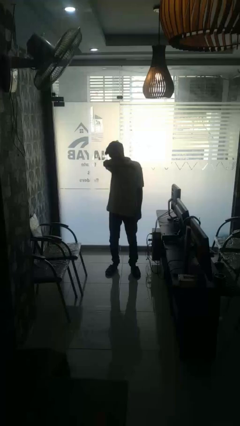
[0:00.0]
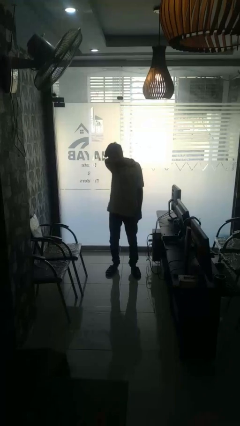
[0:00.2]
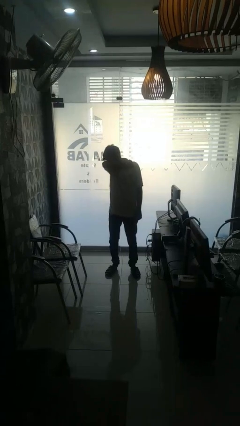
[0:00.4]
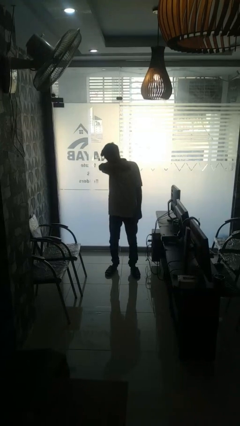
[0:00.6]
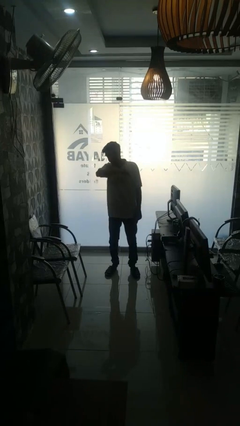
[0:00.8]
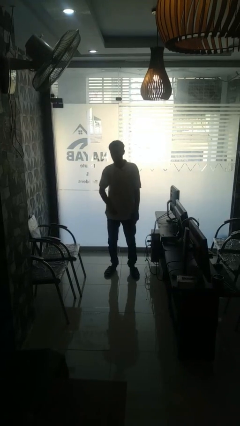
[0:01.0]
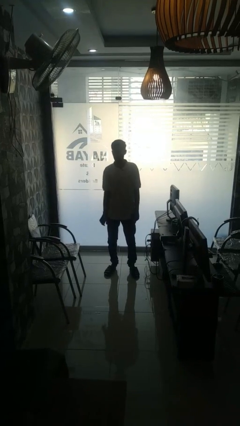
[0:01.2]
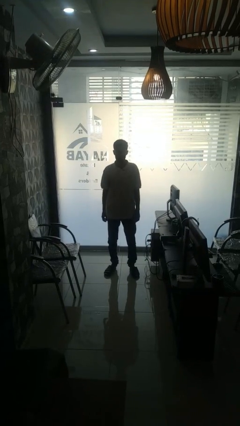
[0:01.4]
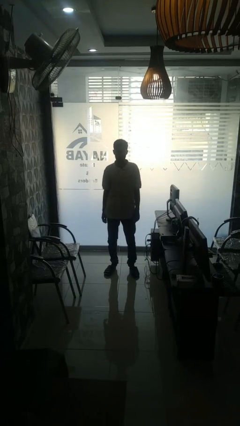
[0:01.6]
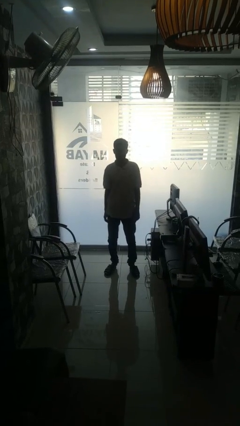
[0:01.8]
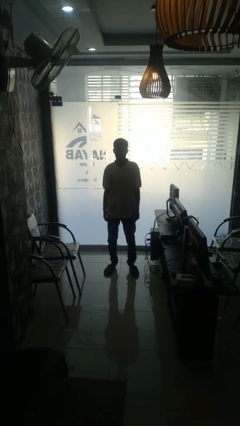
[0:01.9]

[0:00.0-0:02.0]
person sneezes into arm

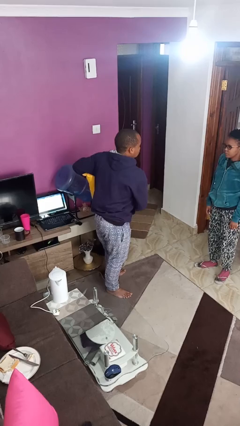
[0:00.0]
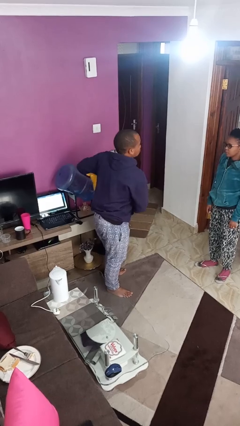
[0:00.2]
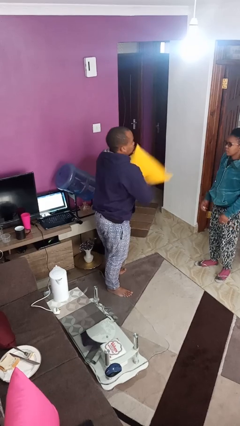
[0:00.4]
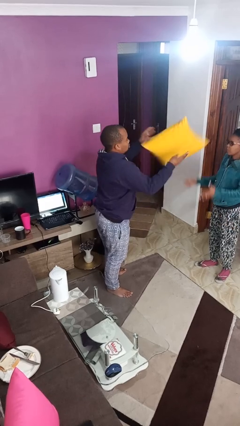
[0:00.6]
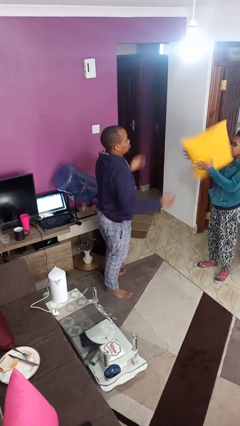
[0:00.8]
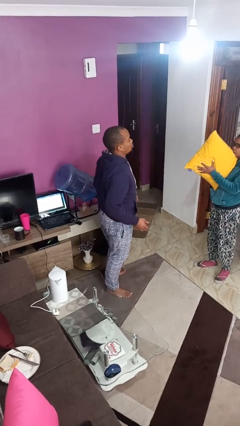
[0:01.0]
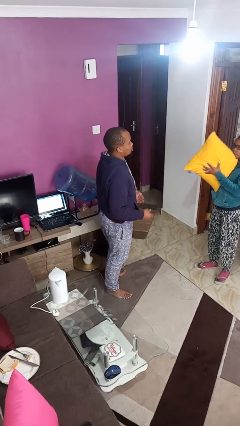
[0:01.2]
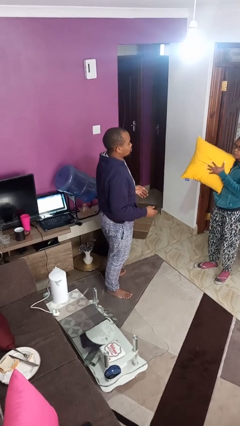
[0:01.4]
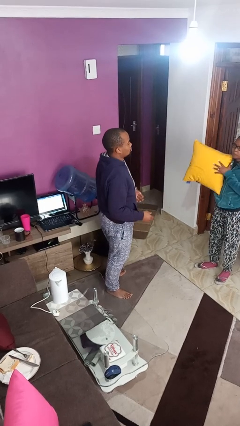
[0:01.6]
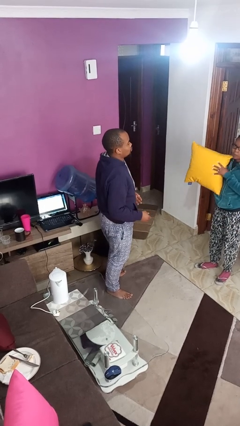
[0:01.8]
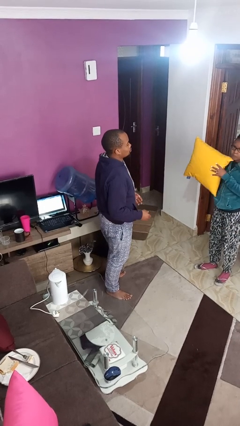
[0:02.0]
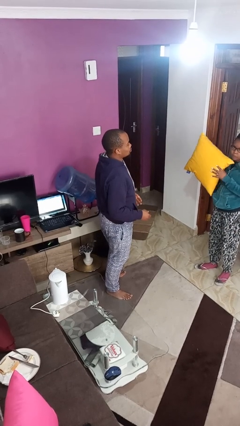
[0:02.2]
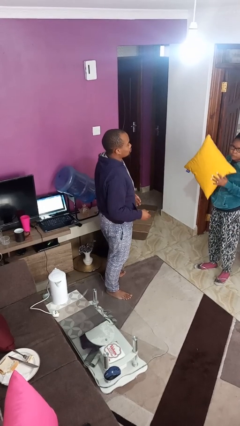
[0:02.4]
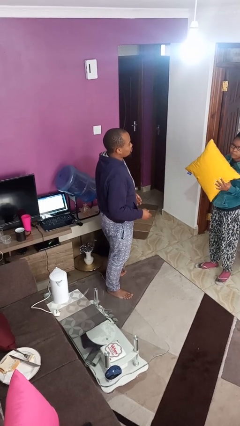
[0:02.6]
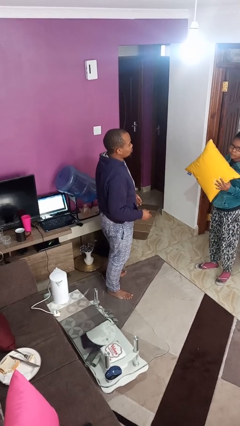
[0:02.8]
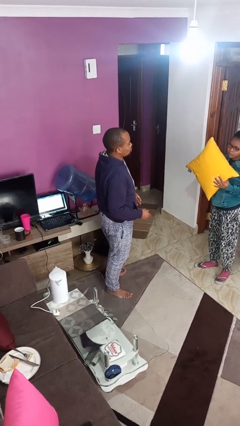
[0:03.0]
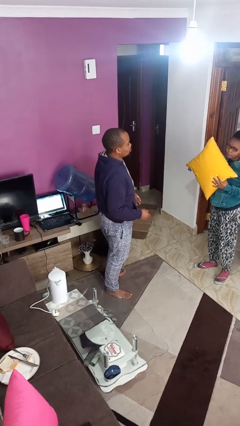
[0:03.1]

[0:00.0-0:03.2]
person throws object to person

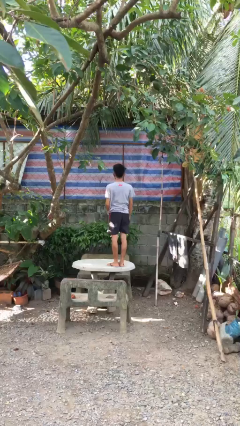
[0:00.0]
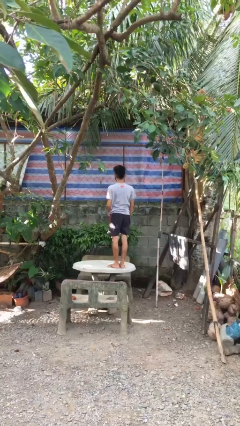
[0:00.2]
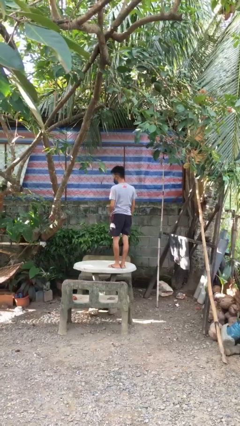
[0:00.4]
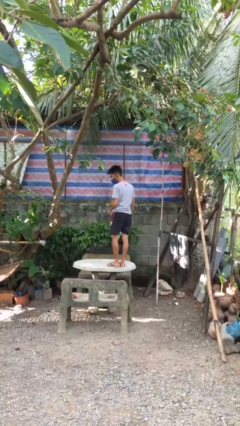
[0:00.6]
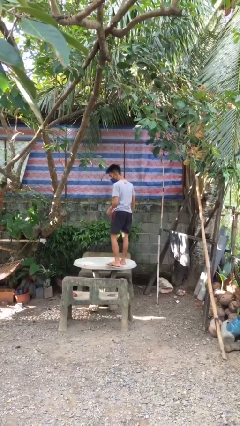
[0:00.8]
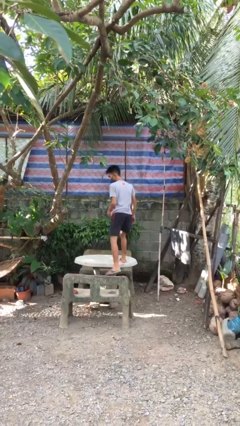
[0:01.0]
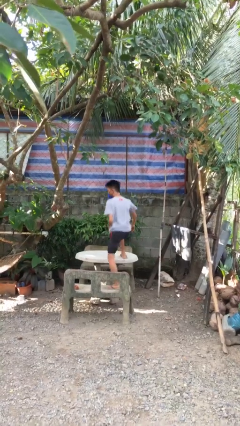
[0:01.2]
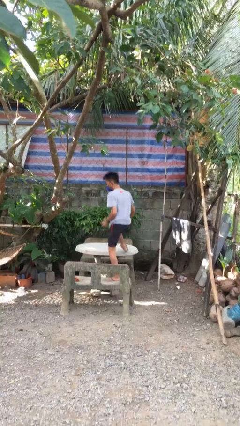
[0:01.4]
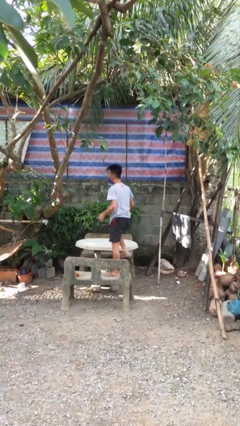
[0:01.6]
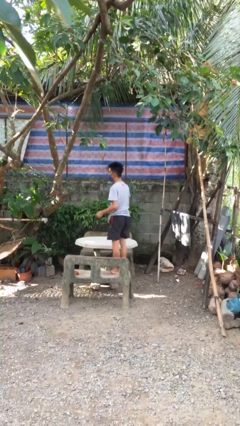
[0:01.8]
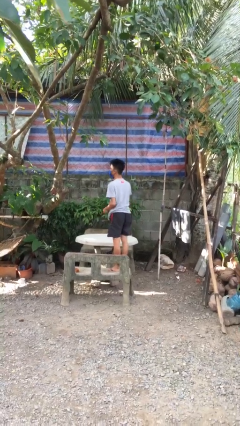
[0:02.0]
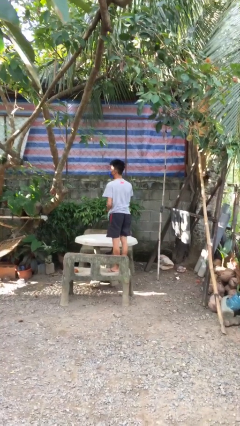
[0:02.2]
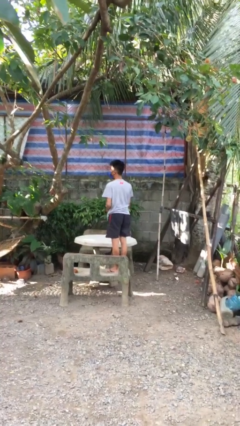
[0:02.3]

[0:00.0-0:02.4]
person climbs off table

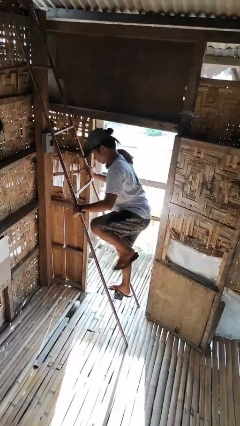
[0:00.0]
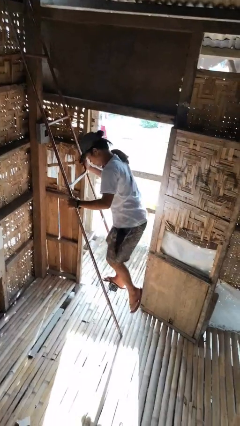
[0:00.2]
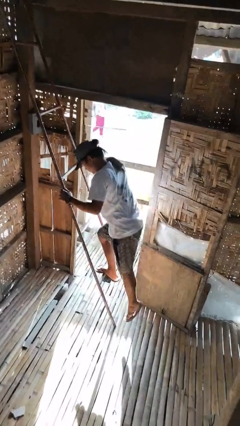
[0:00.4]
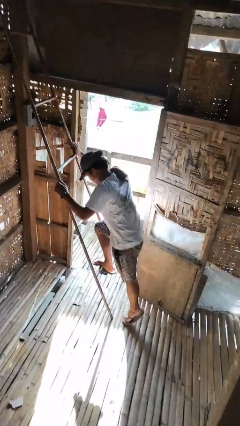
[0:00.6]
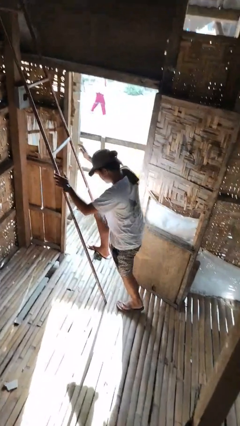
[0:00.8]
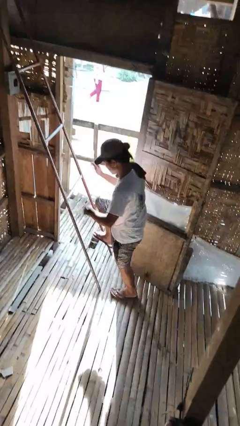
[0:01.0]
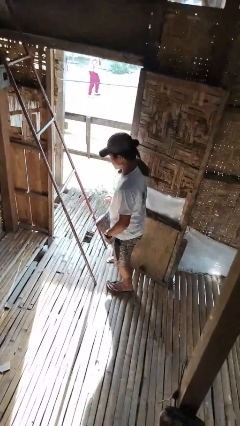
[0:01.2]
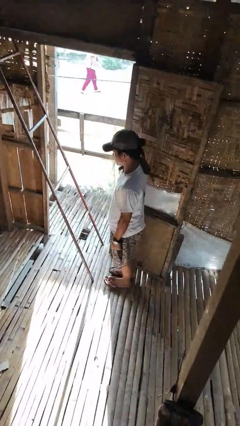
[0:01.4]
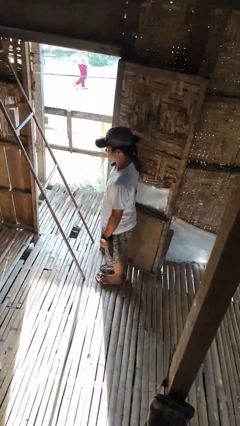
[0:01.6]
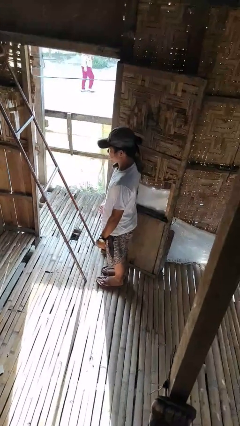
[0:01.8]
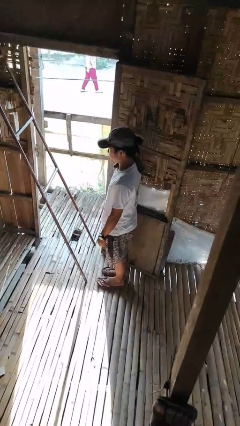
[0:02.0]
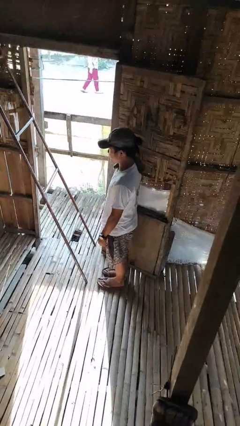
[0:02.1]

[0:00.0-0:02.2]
person climbs down ladder

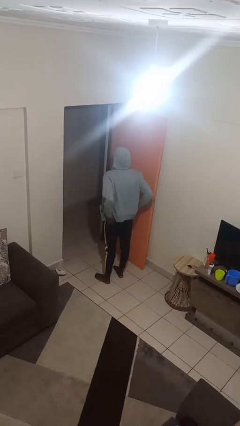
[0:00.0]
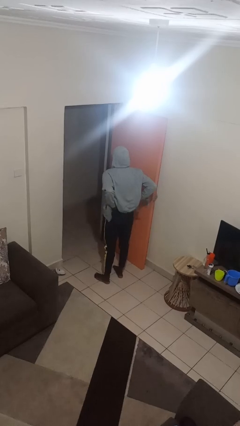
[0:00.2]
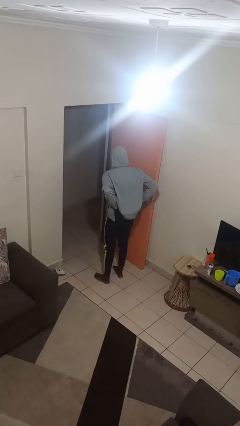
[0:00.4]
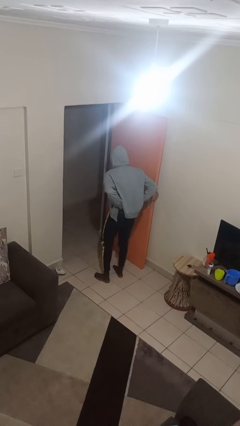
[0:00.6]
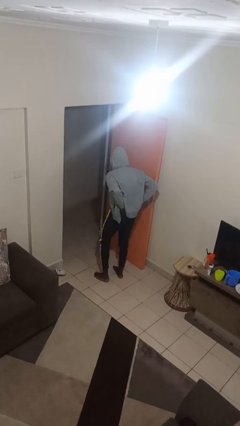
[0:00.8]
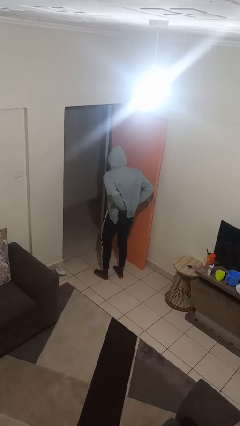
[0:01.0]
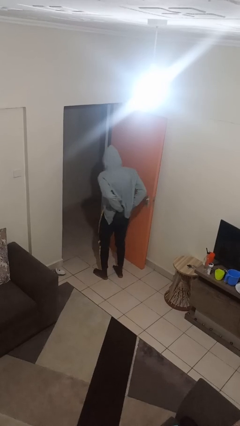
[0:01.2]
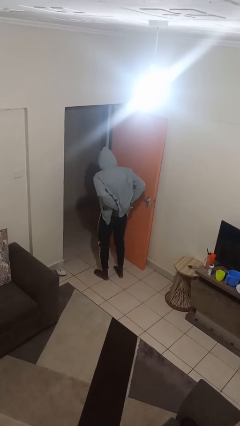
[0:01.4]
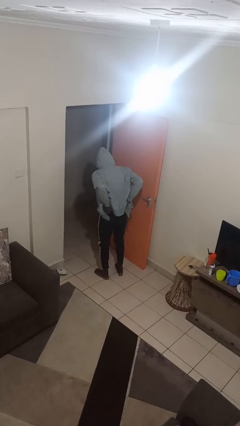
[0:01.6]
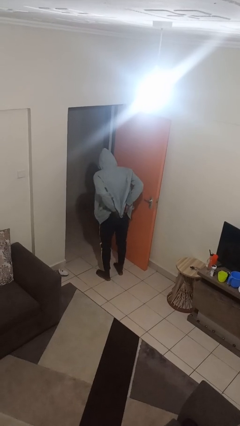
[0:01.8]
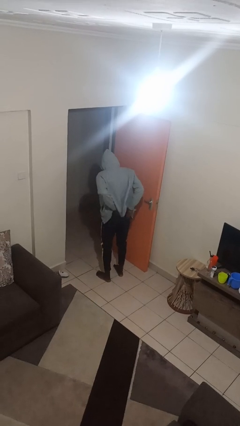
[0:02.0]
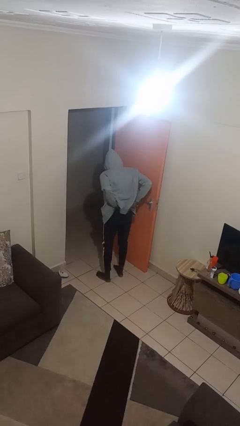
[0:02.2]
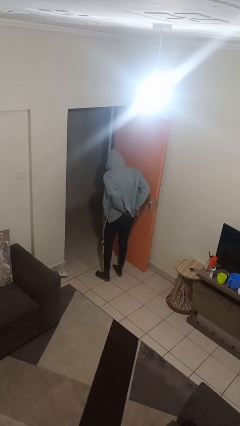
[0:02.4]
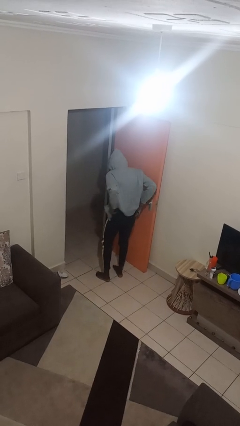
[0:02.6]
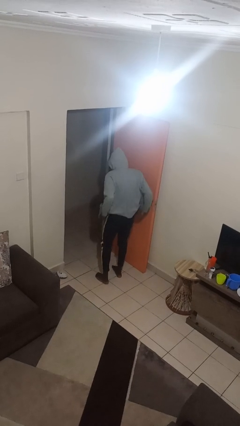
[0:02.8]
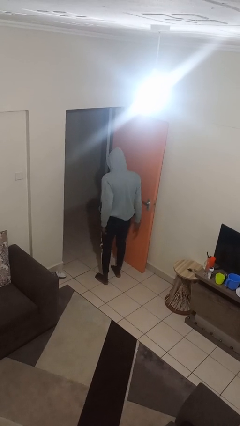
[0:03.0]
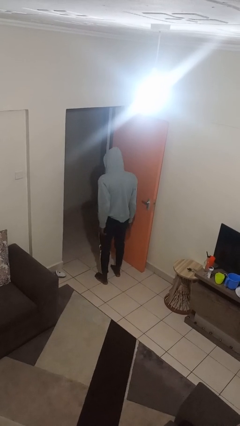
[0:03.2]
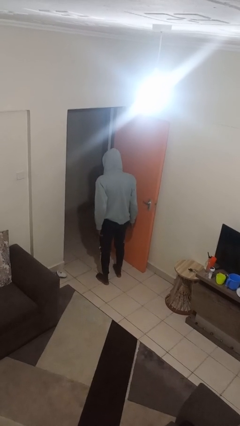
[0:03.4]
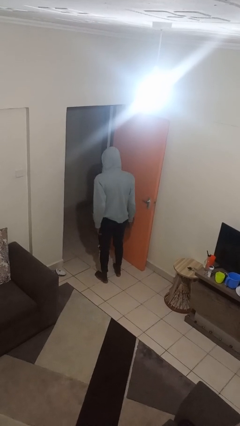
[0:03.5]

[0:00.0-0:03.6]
person hikes up pants

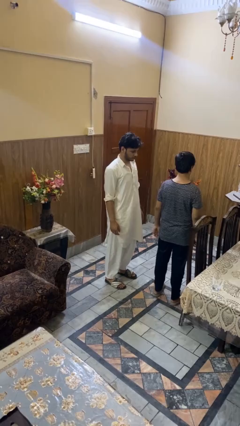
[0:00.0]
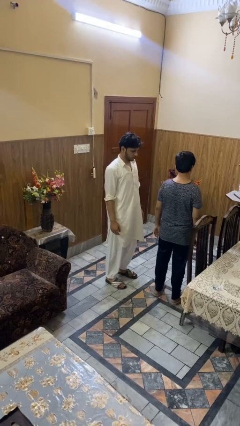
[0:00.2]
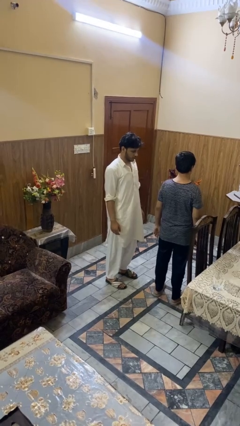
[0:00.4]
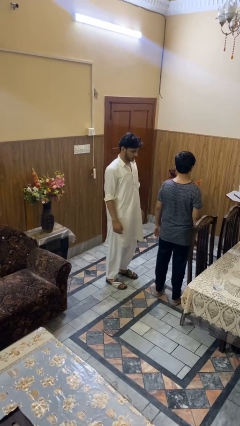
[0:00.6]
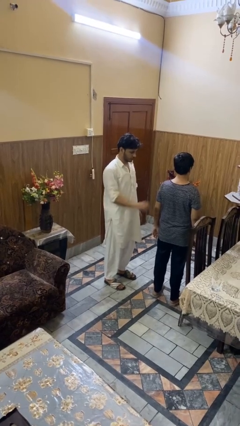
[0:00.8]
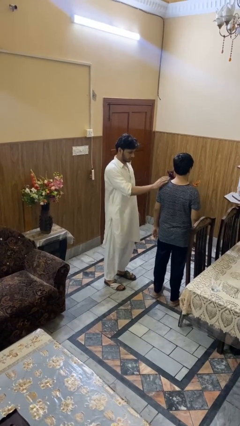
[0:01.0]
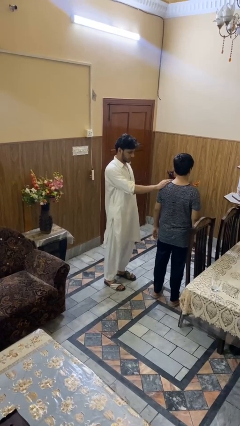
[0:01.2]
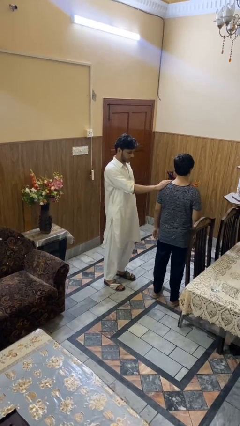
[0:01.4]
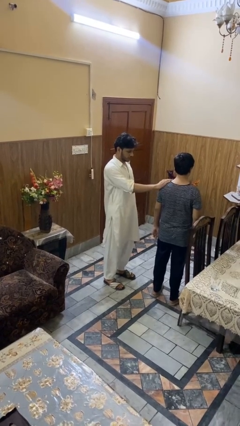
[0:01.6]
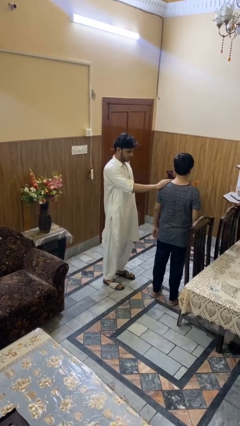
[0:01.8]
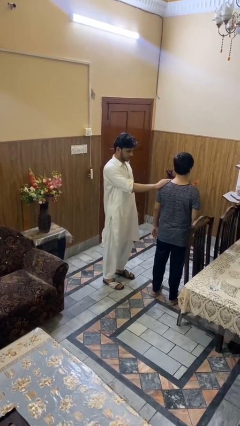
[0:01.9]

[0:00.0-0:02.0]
person grabs person by shoulder

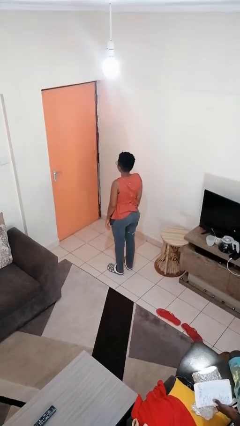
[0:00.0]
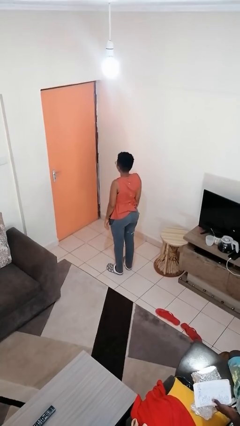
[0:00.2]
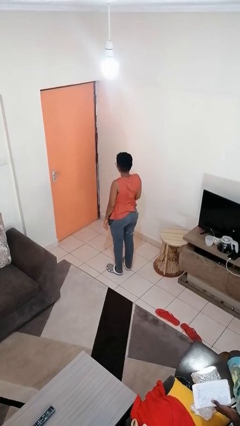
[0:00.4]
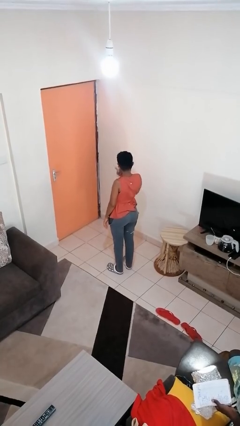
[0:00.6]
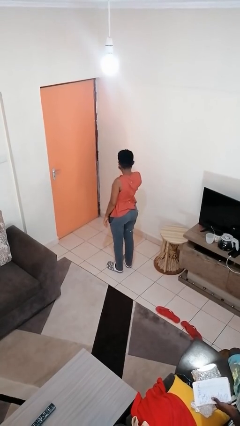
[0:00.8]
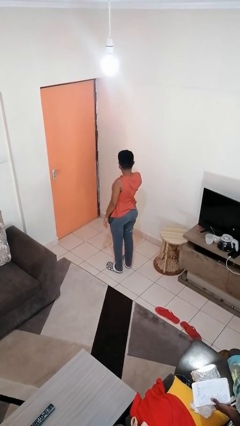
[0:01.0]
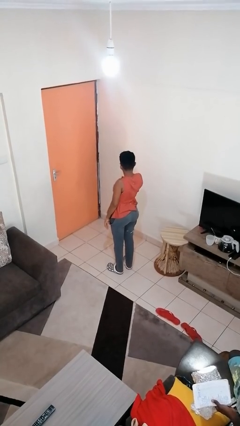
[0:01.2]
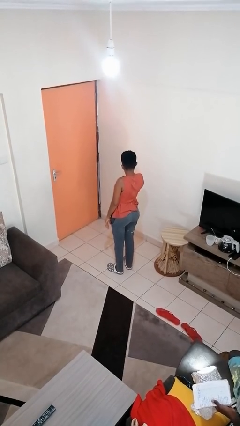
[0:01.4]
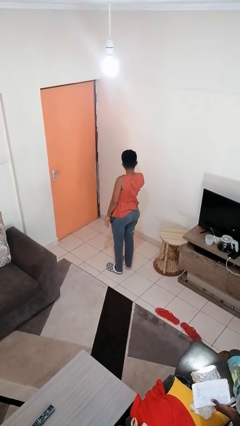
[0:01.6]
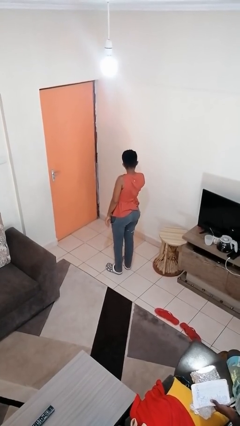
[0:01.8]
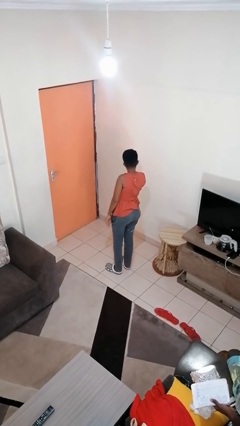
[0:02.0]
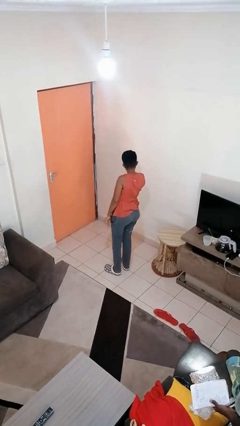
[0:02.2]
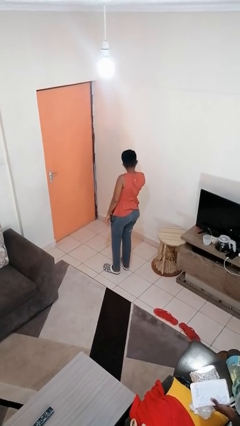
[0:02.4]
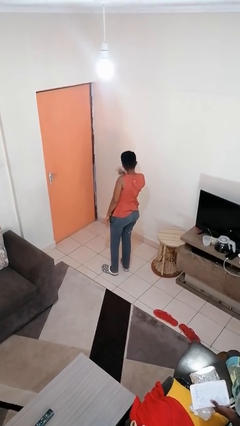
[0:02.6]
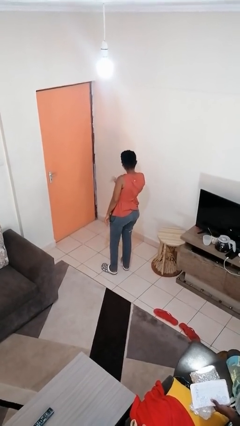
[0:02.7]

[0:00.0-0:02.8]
person gestures watch closely
